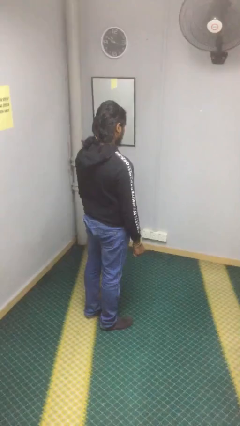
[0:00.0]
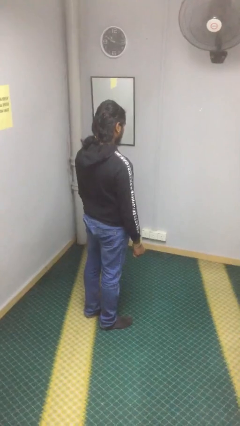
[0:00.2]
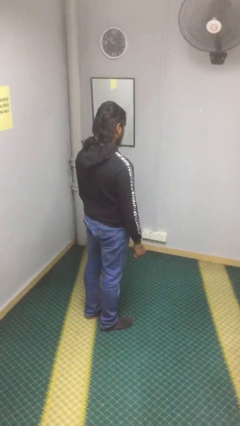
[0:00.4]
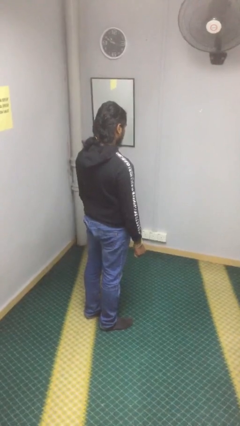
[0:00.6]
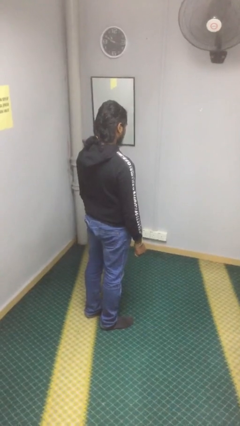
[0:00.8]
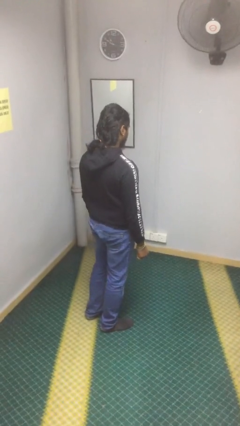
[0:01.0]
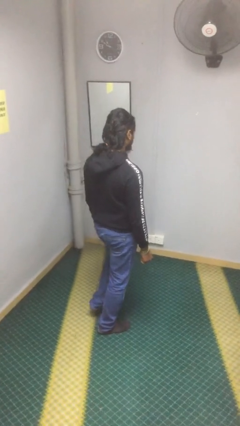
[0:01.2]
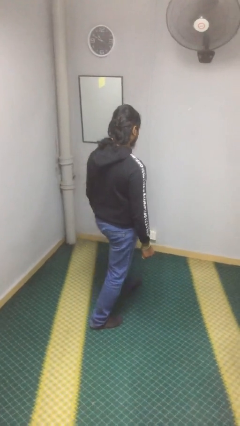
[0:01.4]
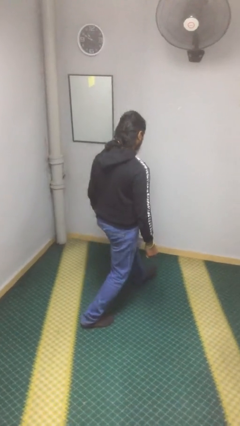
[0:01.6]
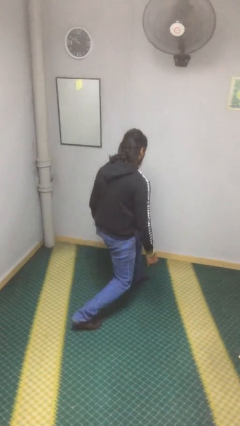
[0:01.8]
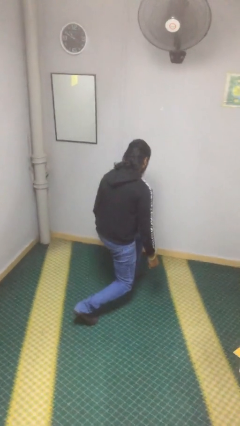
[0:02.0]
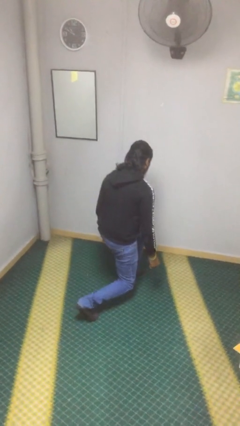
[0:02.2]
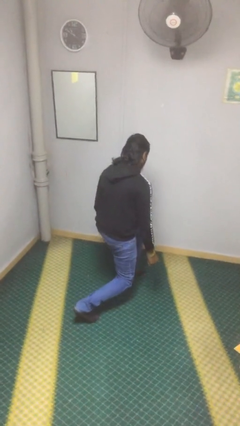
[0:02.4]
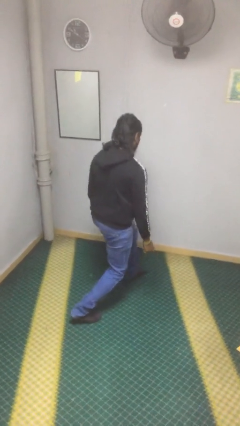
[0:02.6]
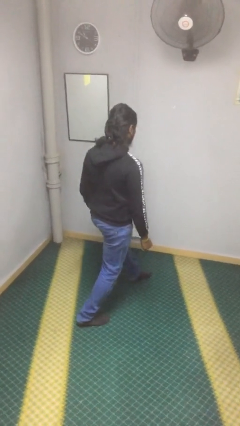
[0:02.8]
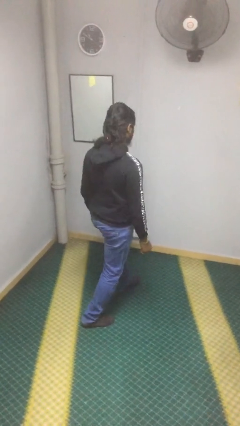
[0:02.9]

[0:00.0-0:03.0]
person exercises with lunges

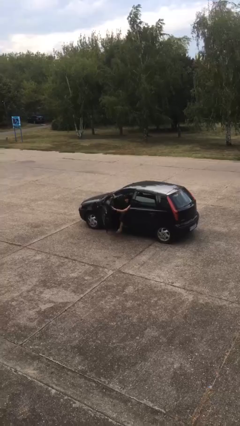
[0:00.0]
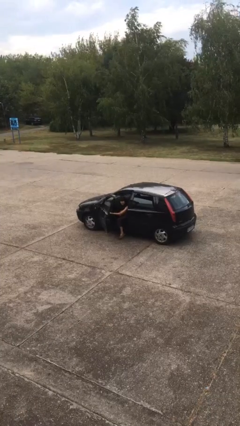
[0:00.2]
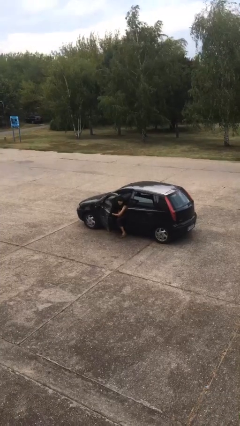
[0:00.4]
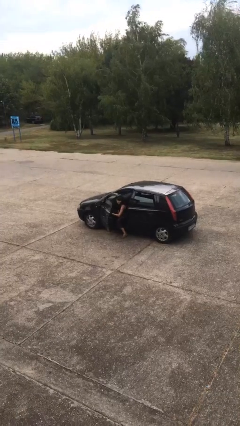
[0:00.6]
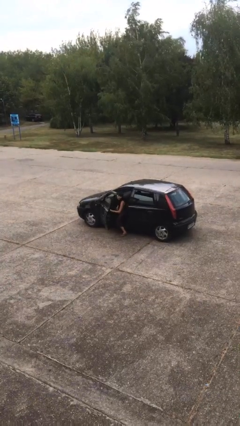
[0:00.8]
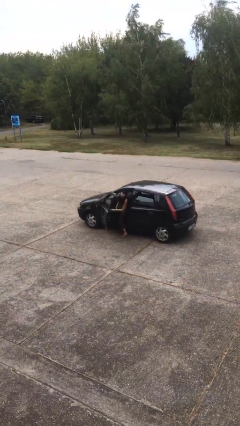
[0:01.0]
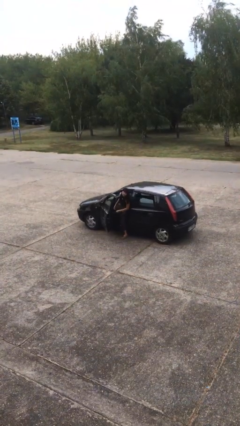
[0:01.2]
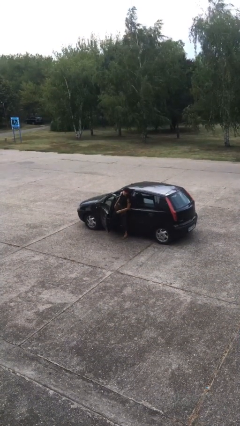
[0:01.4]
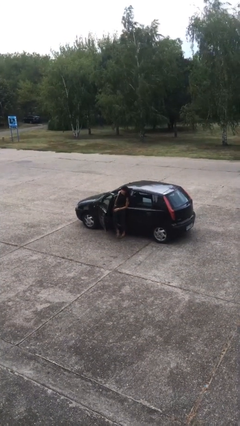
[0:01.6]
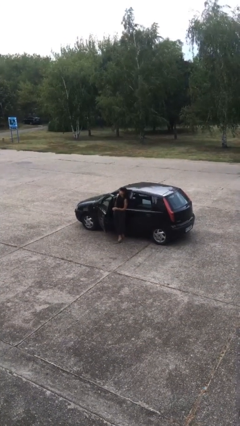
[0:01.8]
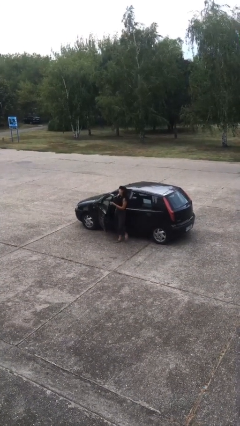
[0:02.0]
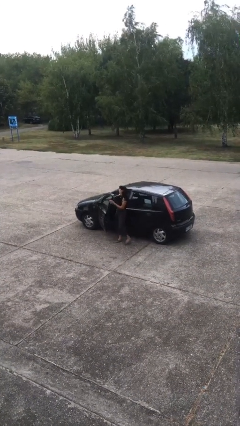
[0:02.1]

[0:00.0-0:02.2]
person exits car

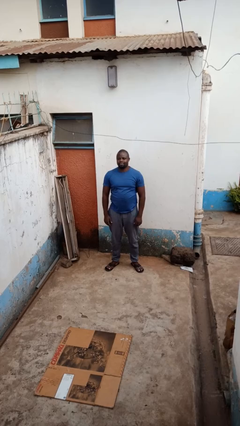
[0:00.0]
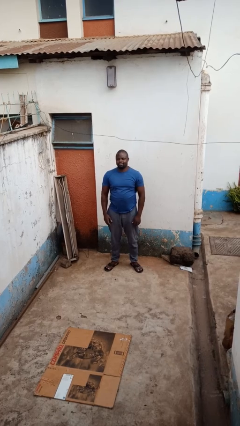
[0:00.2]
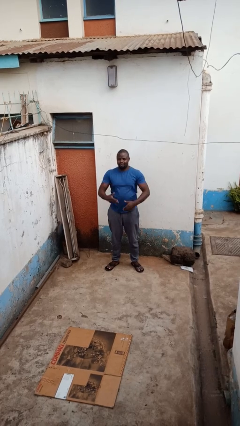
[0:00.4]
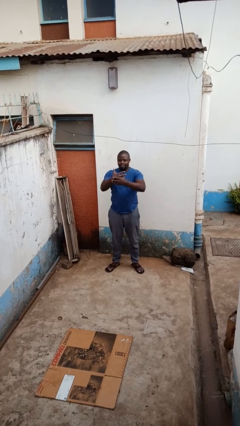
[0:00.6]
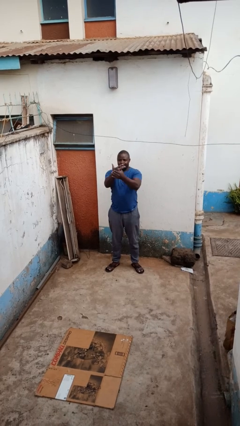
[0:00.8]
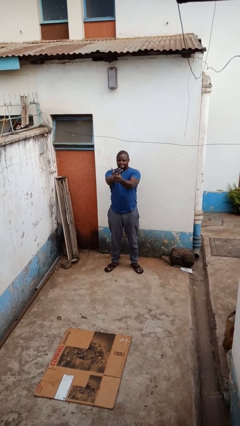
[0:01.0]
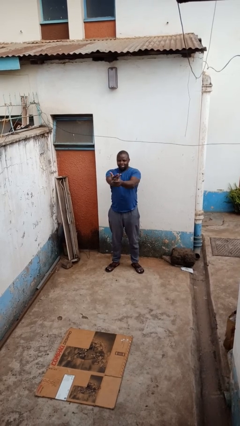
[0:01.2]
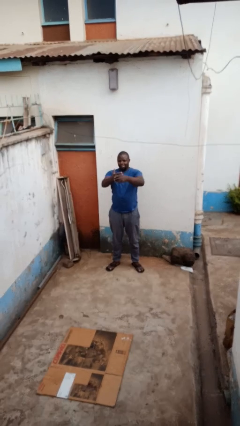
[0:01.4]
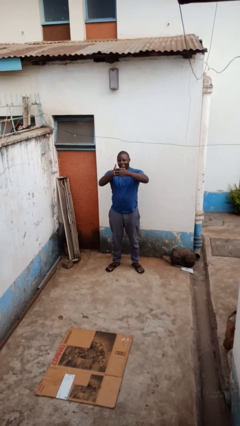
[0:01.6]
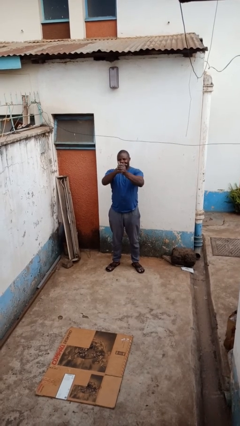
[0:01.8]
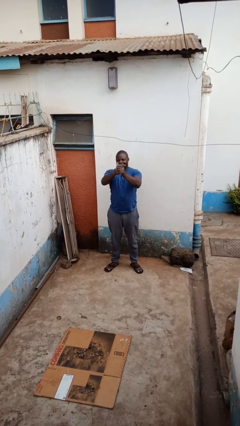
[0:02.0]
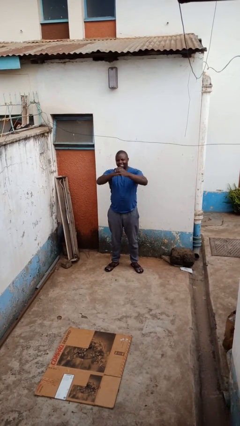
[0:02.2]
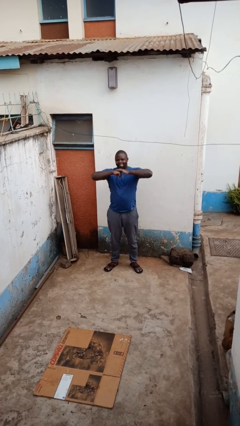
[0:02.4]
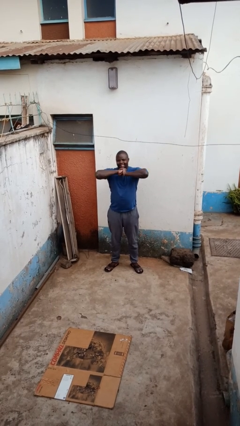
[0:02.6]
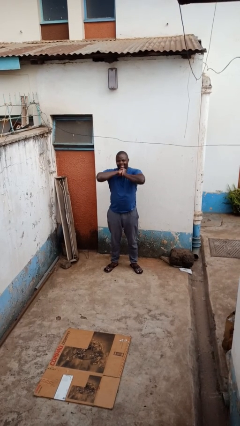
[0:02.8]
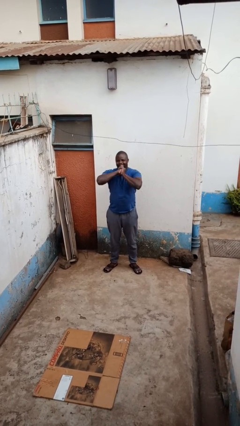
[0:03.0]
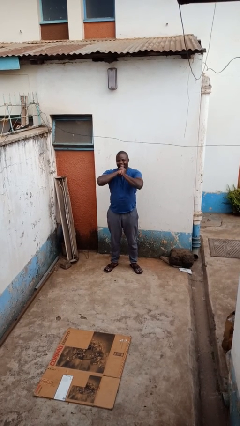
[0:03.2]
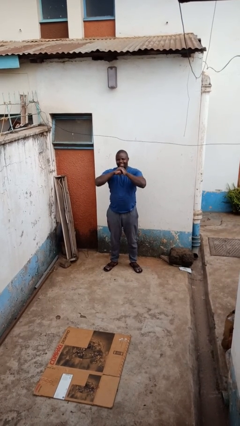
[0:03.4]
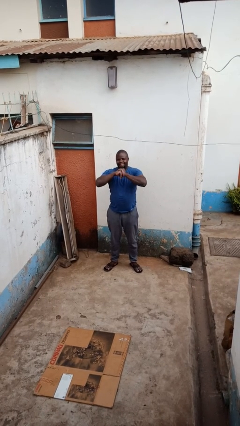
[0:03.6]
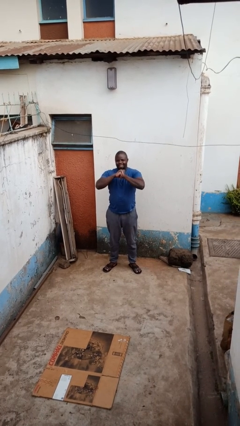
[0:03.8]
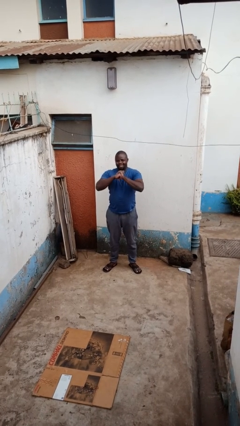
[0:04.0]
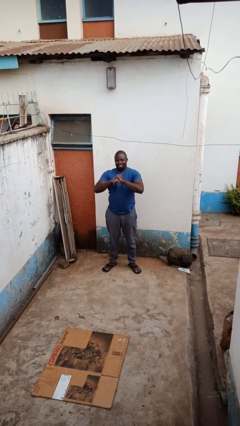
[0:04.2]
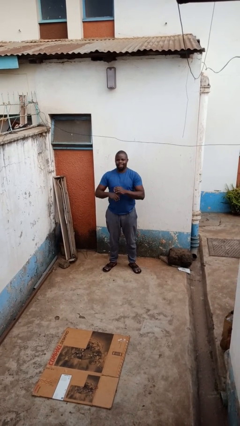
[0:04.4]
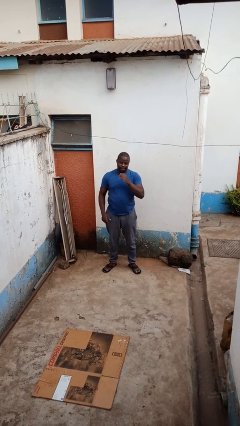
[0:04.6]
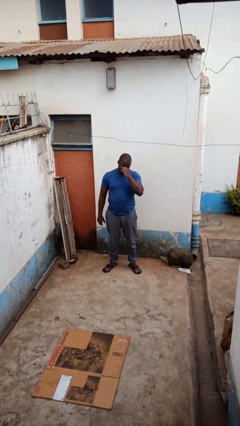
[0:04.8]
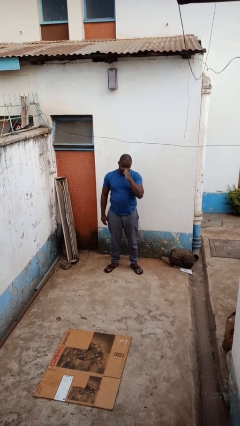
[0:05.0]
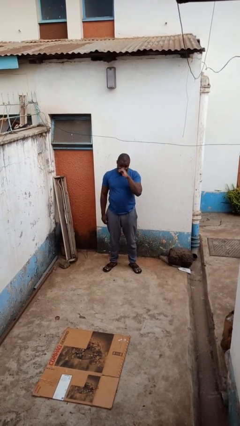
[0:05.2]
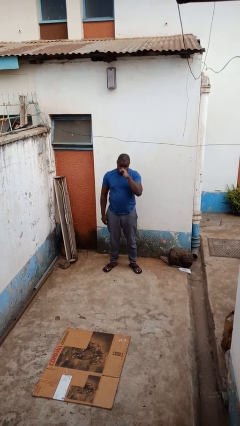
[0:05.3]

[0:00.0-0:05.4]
person cracks knuckles

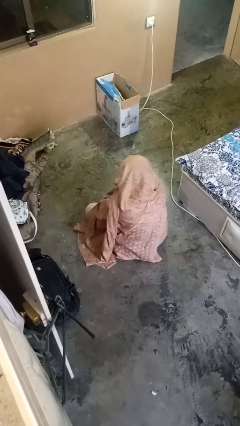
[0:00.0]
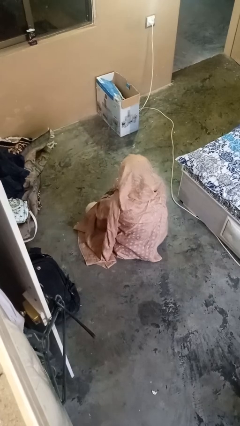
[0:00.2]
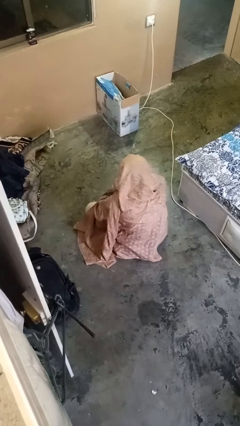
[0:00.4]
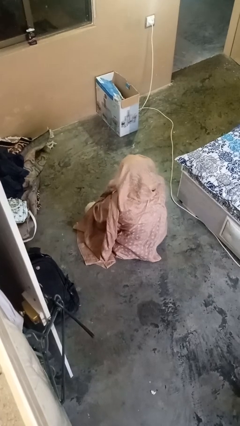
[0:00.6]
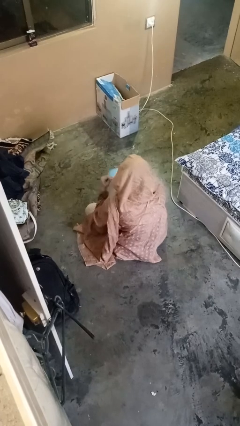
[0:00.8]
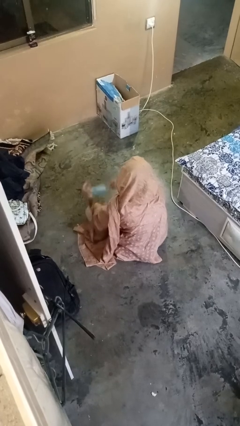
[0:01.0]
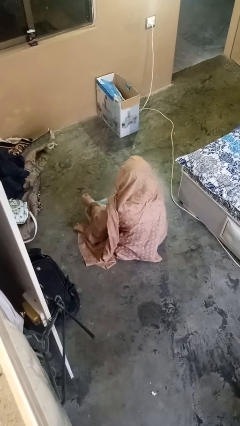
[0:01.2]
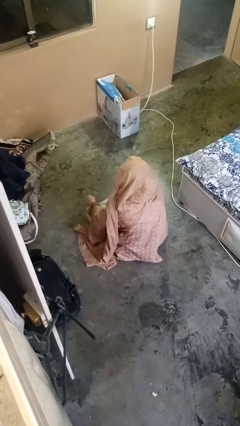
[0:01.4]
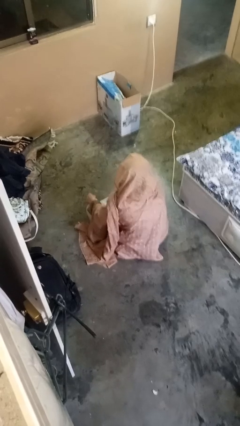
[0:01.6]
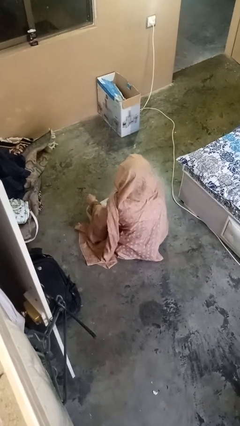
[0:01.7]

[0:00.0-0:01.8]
person takes off facemask

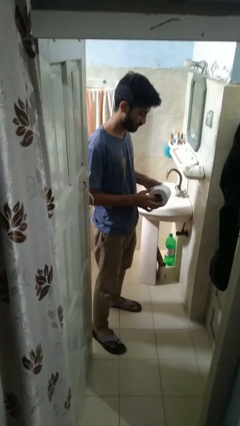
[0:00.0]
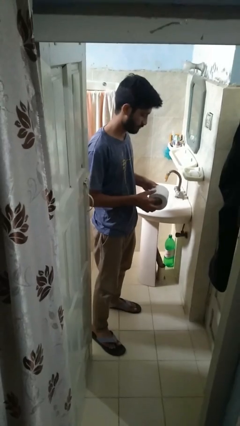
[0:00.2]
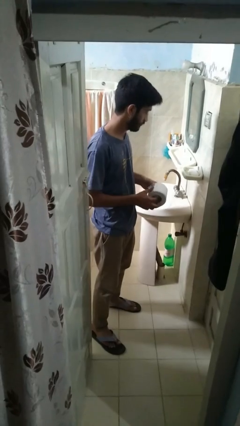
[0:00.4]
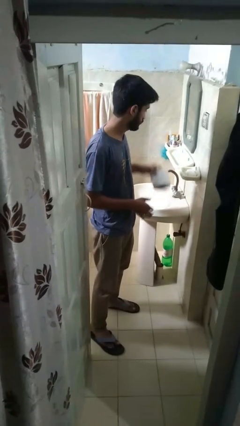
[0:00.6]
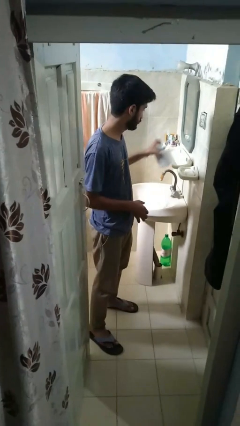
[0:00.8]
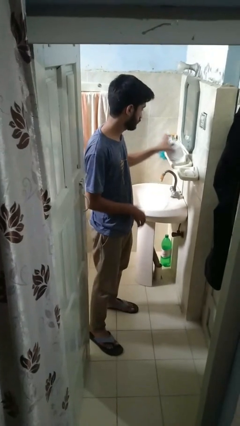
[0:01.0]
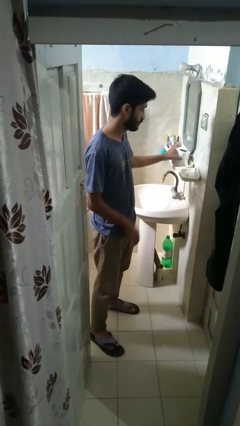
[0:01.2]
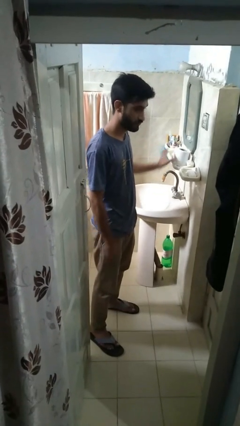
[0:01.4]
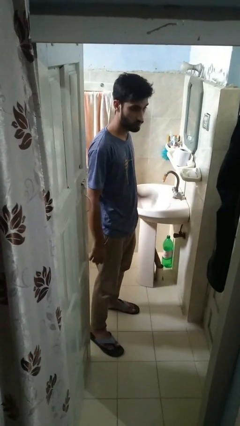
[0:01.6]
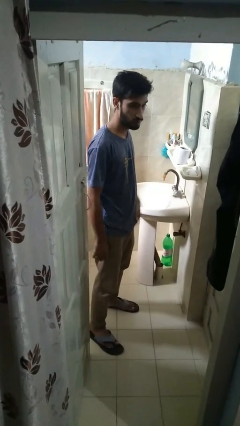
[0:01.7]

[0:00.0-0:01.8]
person puts down object on countertop

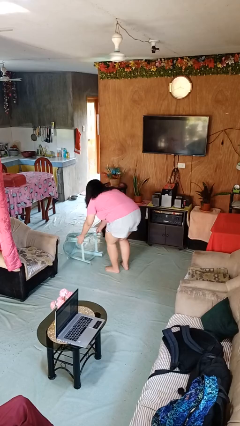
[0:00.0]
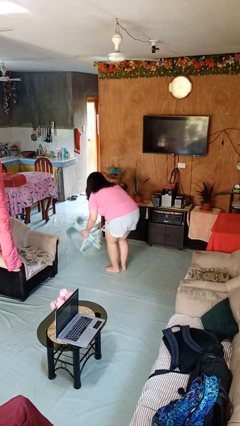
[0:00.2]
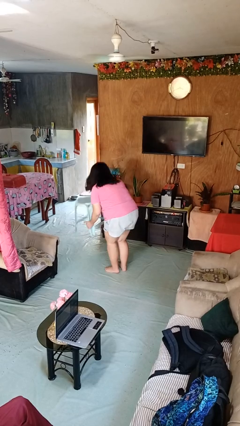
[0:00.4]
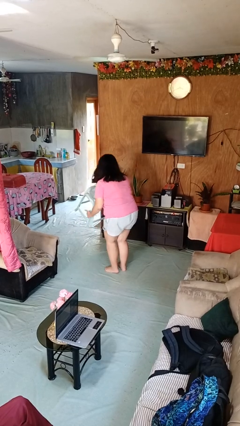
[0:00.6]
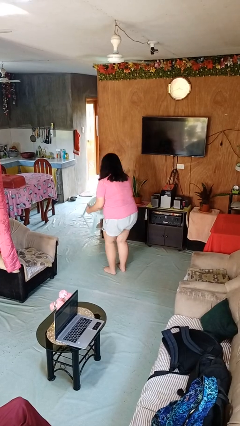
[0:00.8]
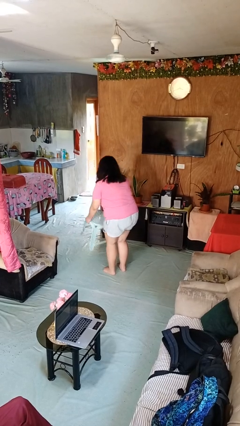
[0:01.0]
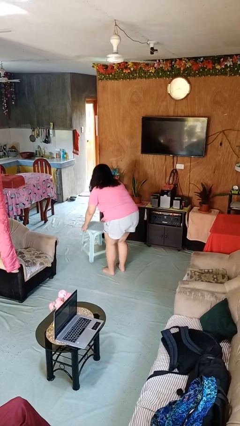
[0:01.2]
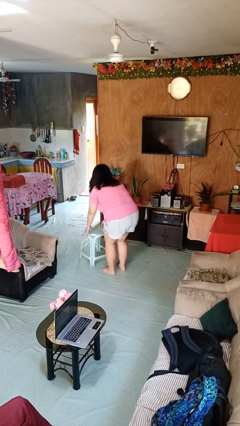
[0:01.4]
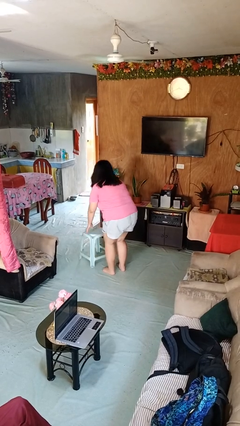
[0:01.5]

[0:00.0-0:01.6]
person sets upright furniture

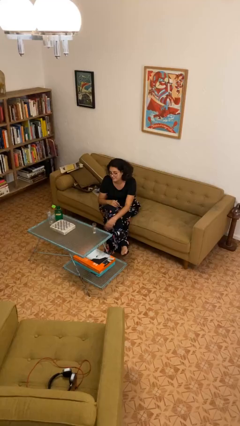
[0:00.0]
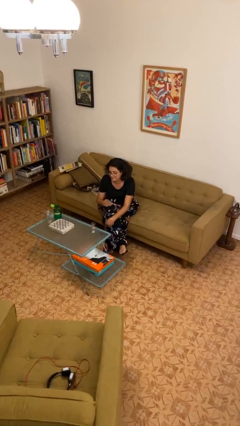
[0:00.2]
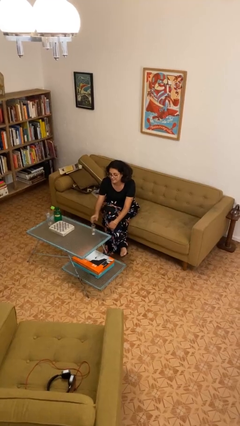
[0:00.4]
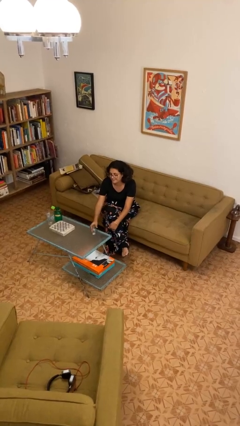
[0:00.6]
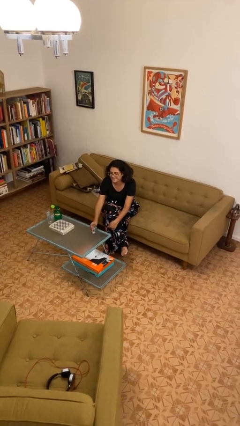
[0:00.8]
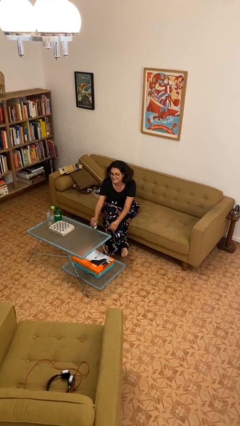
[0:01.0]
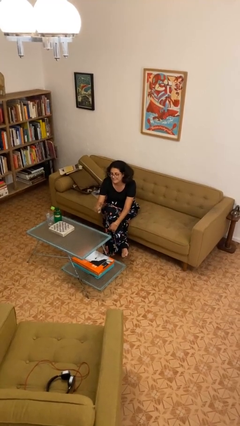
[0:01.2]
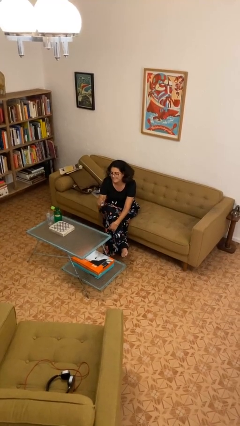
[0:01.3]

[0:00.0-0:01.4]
person picks up object from table
